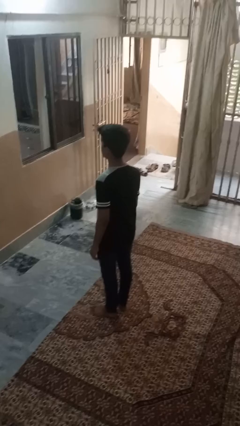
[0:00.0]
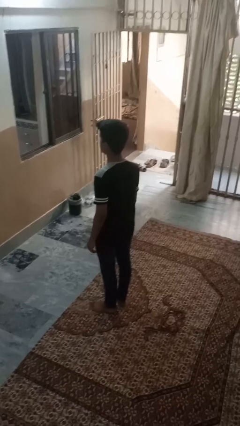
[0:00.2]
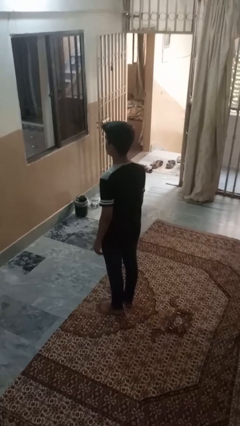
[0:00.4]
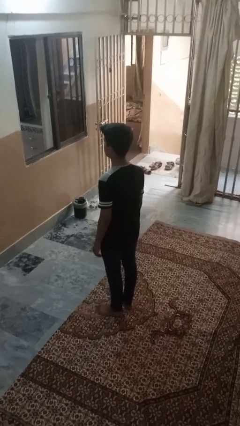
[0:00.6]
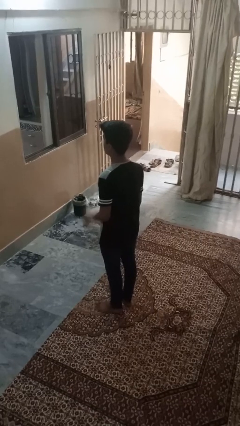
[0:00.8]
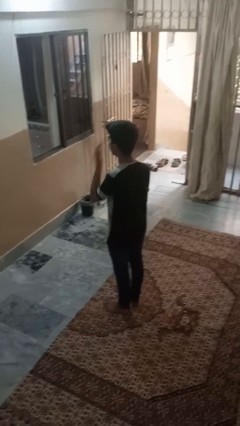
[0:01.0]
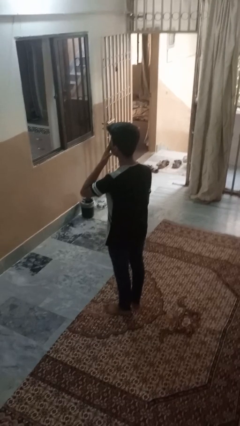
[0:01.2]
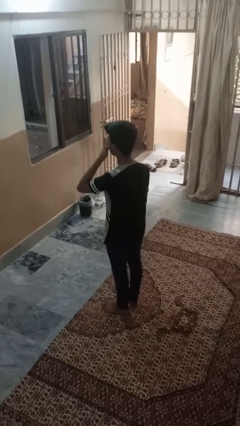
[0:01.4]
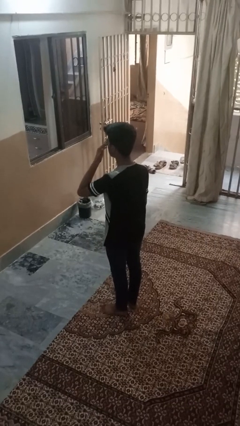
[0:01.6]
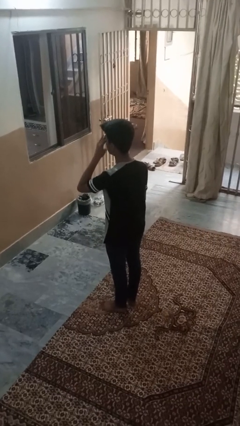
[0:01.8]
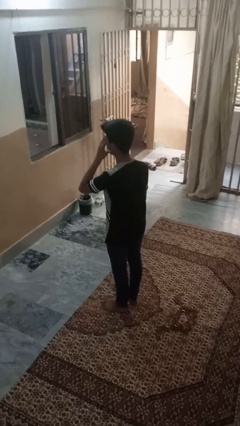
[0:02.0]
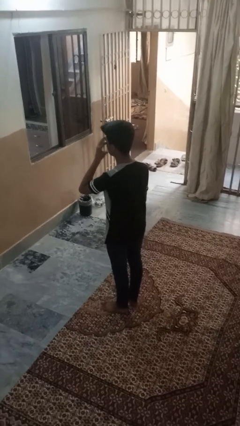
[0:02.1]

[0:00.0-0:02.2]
person rubs eyes

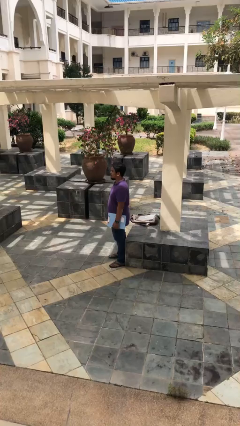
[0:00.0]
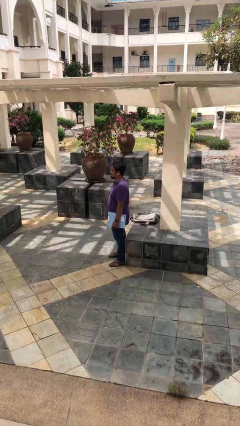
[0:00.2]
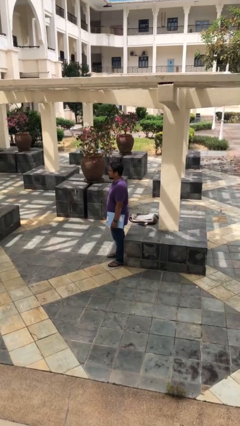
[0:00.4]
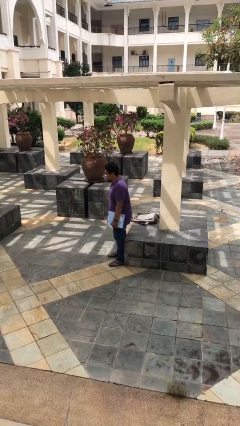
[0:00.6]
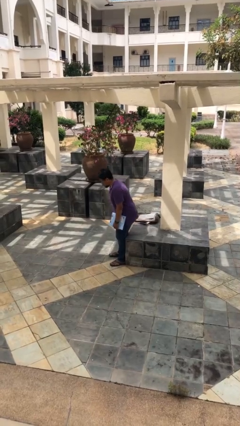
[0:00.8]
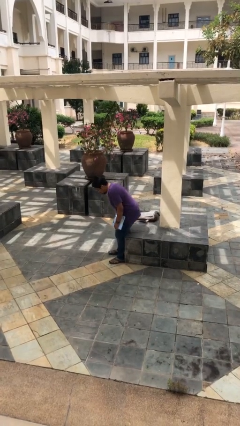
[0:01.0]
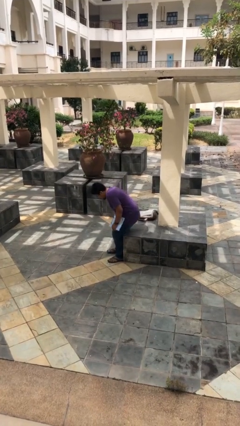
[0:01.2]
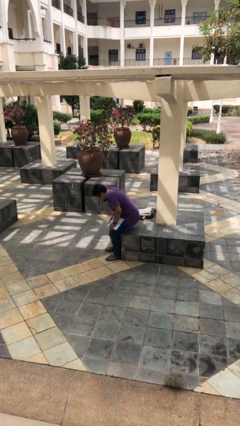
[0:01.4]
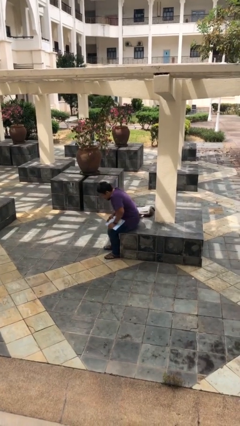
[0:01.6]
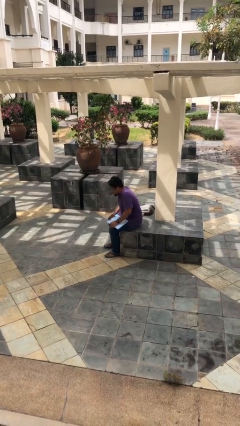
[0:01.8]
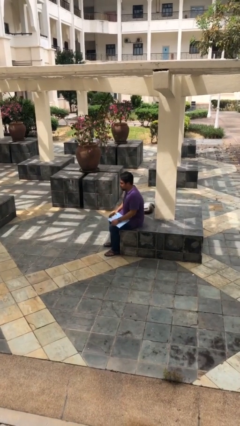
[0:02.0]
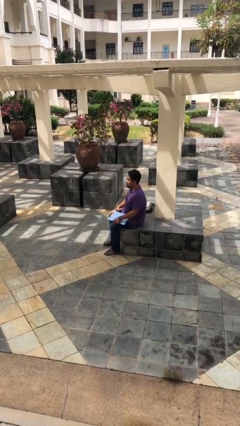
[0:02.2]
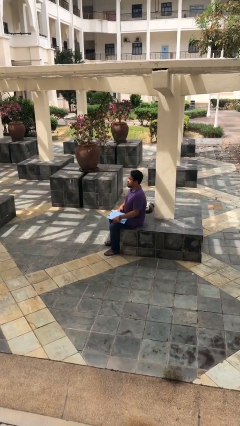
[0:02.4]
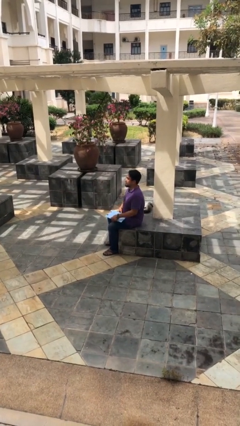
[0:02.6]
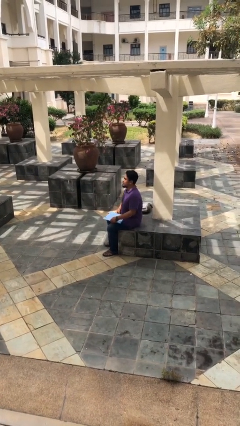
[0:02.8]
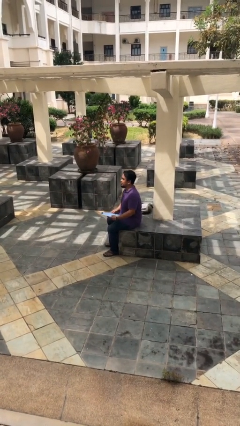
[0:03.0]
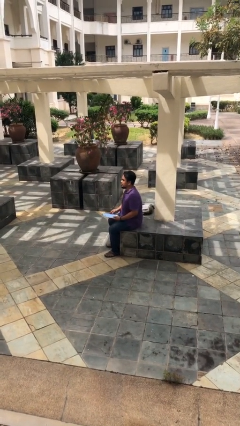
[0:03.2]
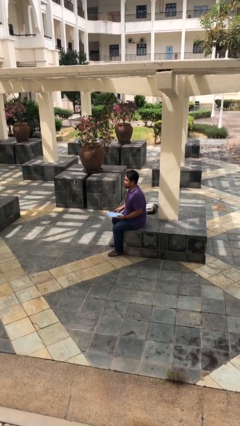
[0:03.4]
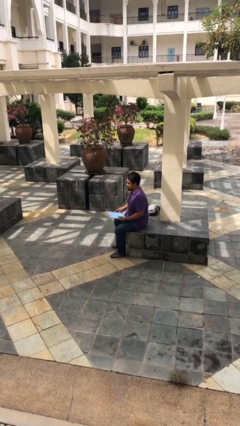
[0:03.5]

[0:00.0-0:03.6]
person sits down

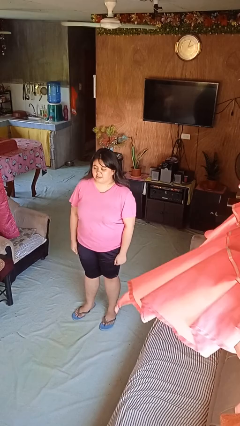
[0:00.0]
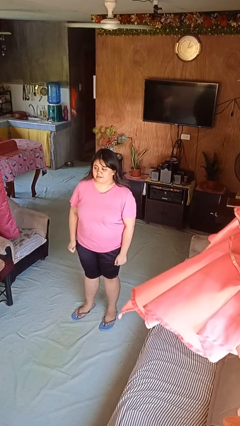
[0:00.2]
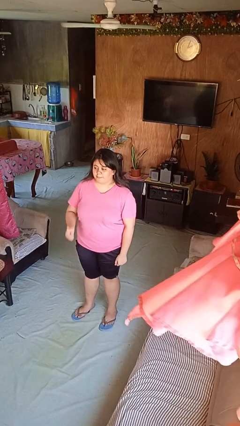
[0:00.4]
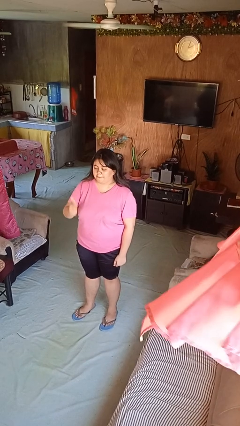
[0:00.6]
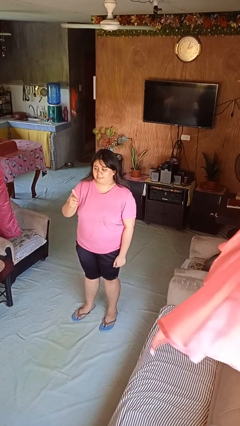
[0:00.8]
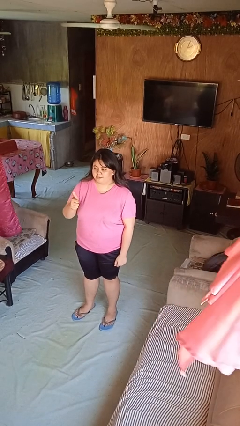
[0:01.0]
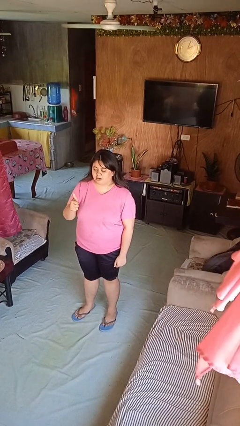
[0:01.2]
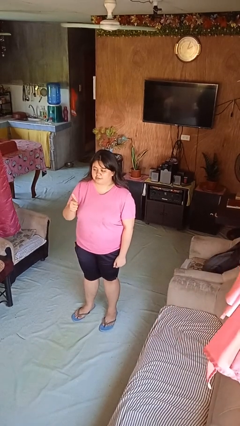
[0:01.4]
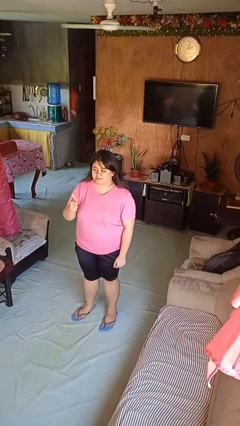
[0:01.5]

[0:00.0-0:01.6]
person gestures thumbs up

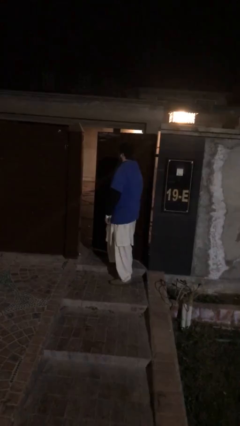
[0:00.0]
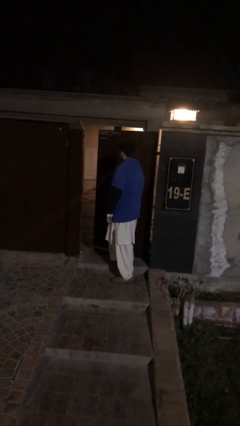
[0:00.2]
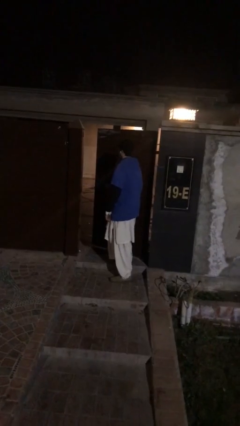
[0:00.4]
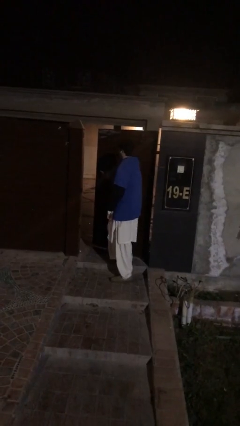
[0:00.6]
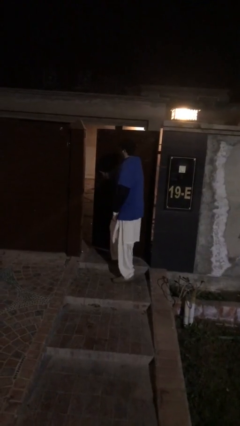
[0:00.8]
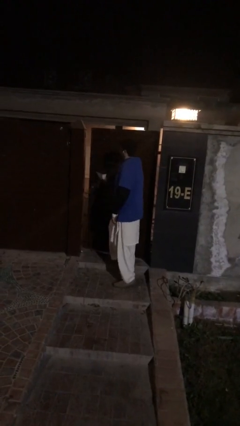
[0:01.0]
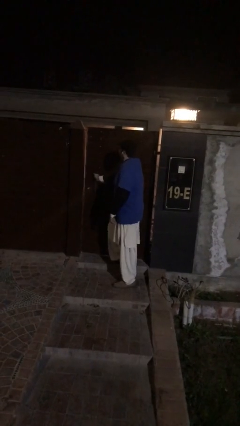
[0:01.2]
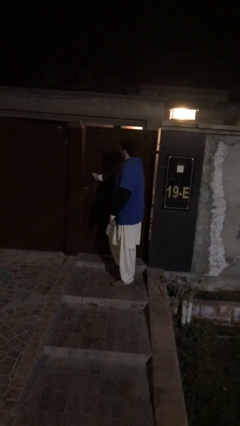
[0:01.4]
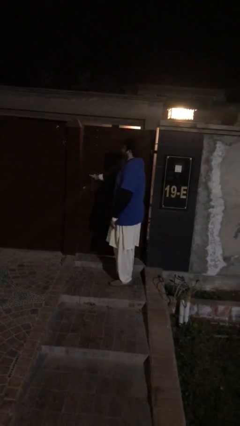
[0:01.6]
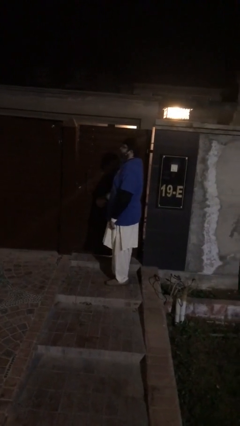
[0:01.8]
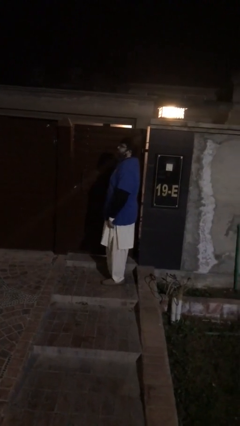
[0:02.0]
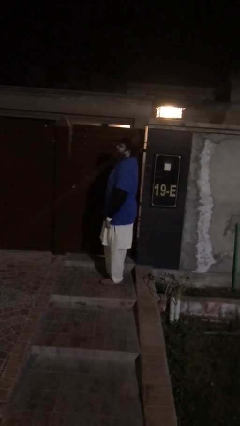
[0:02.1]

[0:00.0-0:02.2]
person closes facility door

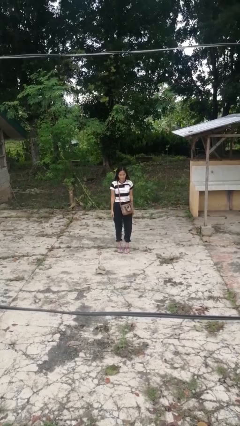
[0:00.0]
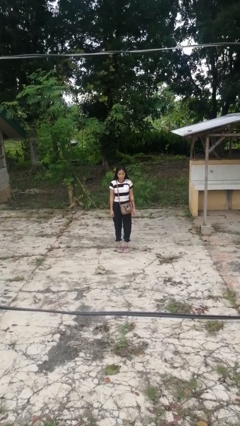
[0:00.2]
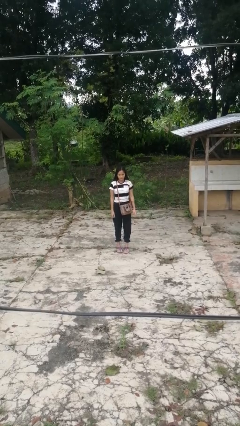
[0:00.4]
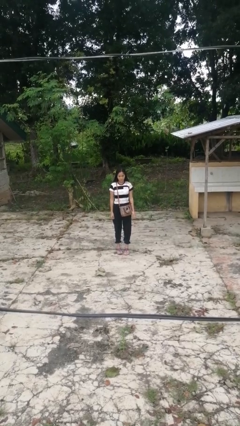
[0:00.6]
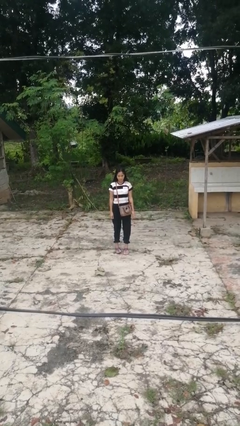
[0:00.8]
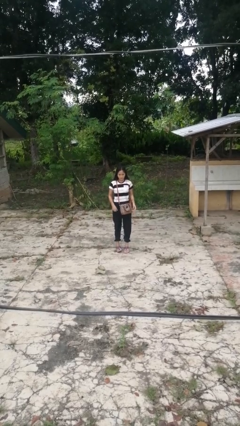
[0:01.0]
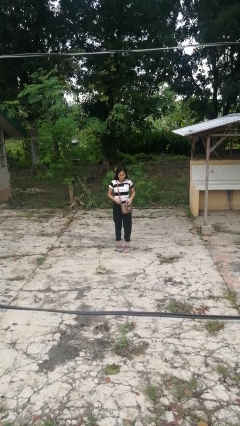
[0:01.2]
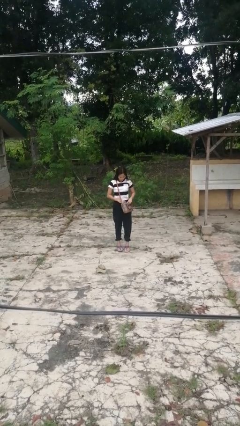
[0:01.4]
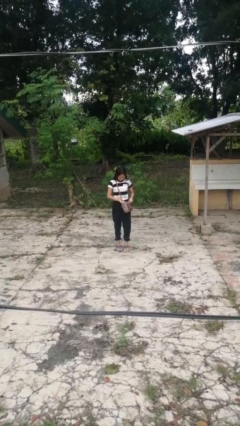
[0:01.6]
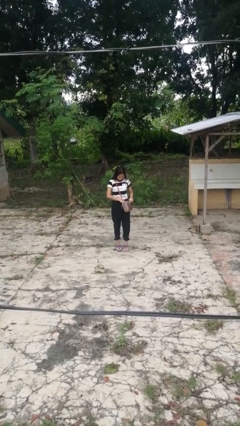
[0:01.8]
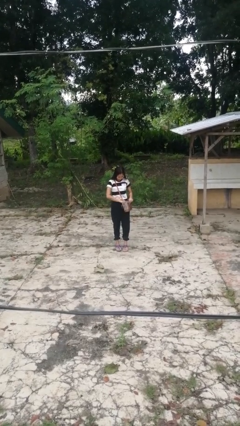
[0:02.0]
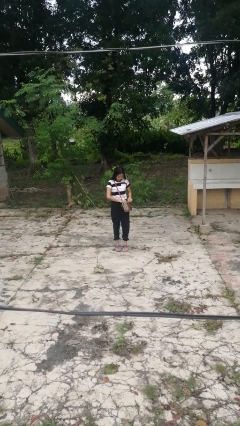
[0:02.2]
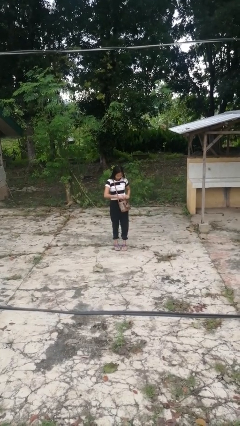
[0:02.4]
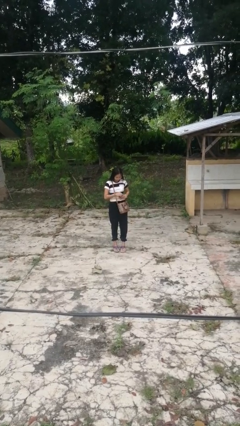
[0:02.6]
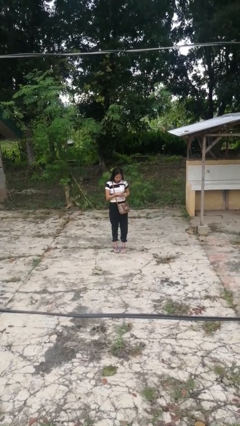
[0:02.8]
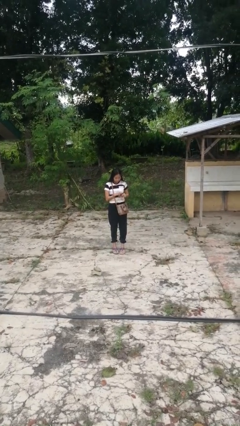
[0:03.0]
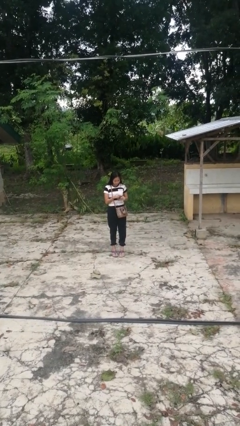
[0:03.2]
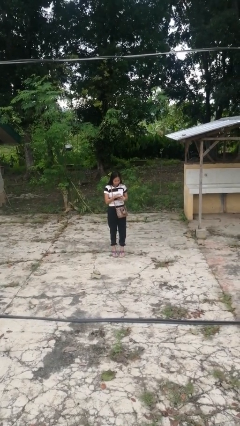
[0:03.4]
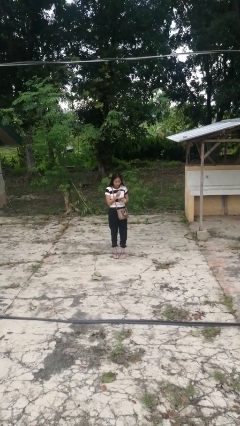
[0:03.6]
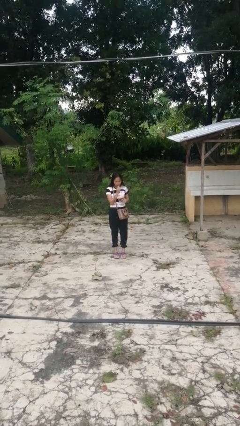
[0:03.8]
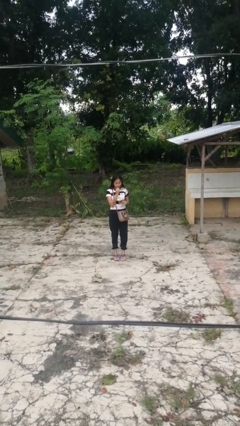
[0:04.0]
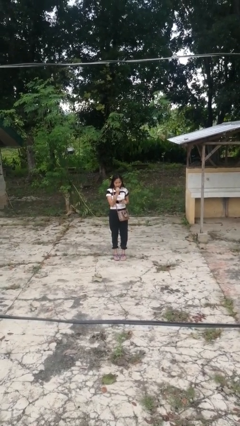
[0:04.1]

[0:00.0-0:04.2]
person eats snack from bag

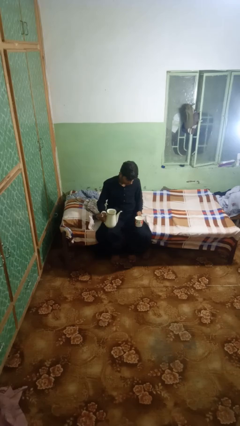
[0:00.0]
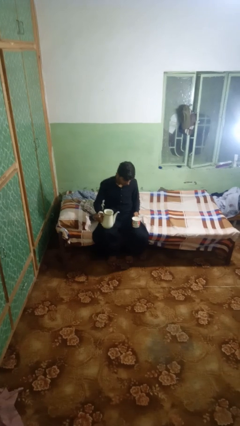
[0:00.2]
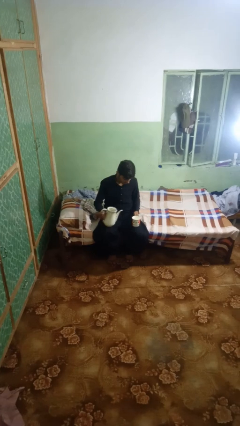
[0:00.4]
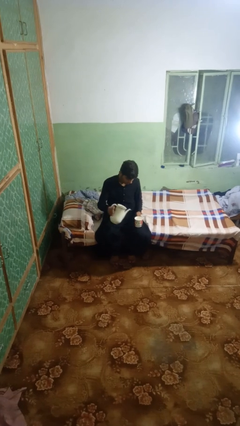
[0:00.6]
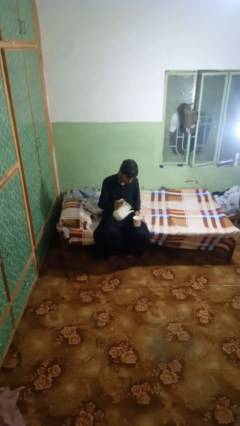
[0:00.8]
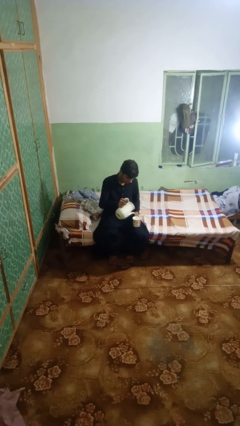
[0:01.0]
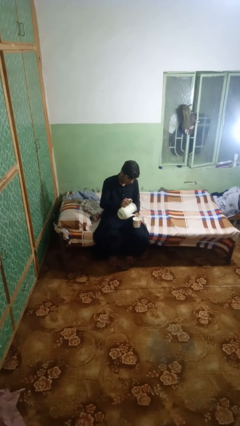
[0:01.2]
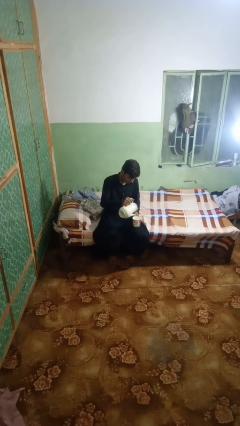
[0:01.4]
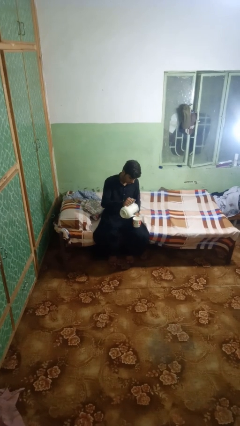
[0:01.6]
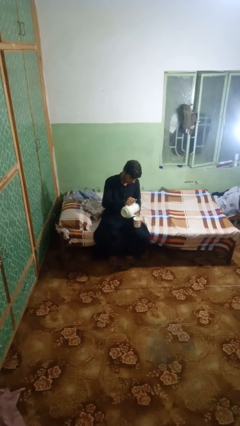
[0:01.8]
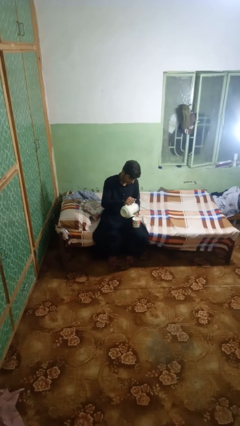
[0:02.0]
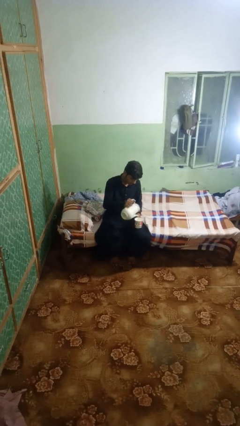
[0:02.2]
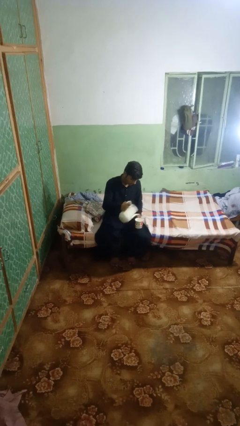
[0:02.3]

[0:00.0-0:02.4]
person pours coffee into mug

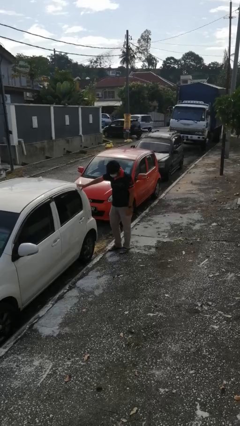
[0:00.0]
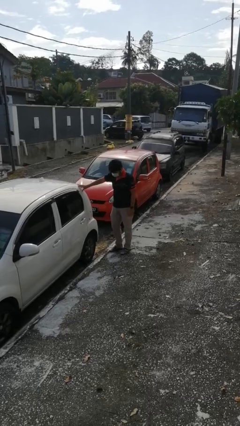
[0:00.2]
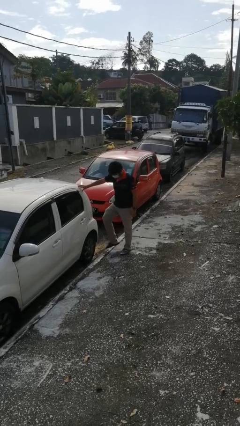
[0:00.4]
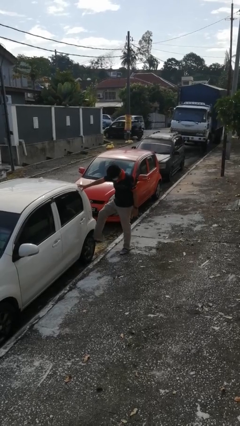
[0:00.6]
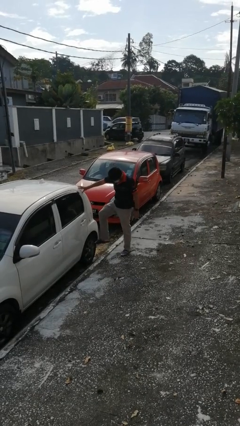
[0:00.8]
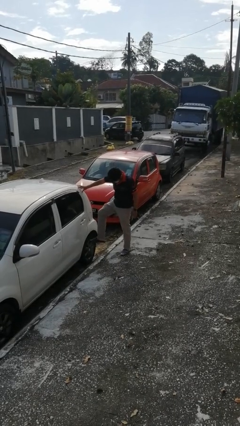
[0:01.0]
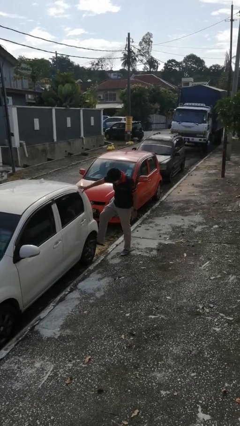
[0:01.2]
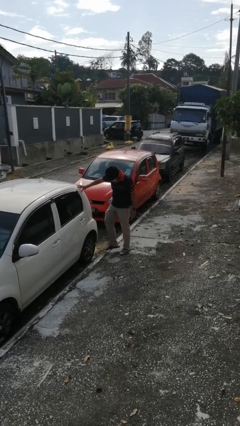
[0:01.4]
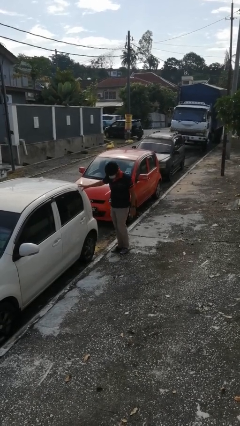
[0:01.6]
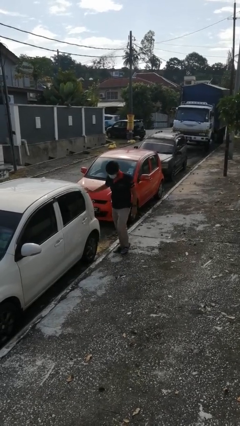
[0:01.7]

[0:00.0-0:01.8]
person kicks car tires
